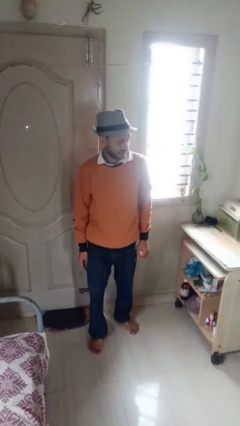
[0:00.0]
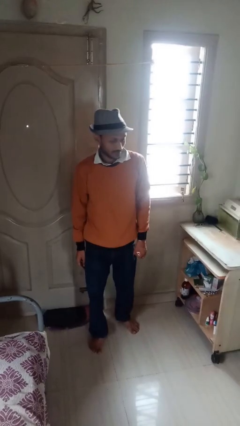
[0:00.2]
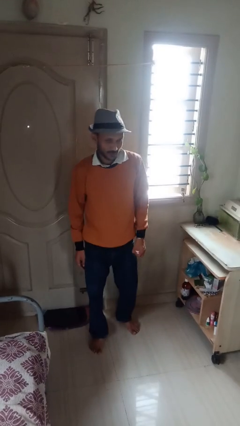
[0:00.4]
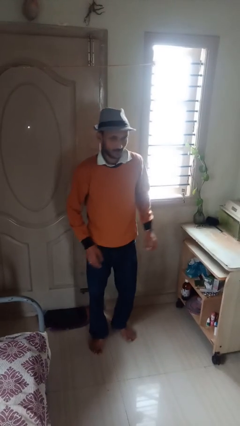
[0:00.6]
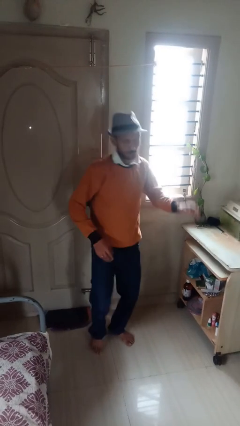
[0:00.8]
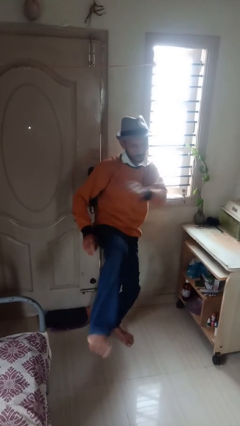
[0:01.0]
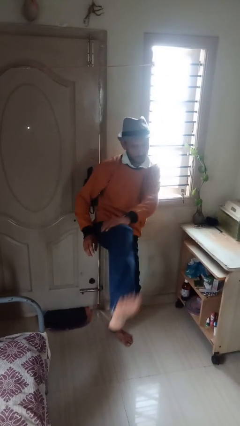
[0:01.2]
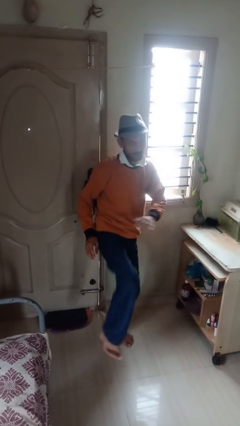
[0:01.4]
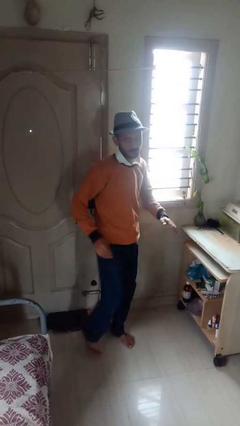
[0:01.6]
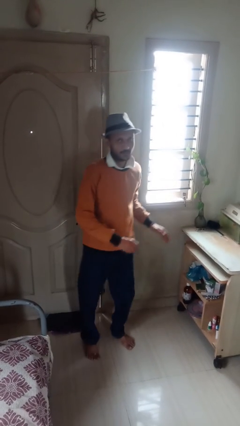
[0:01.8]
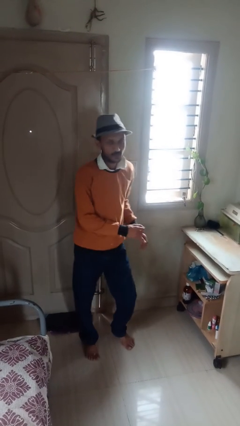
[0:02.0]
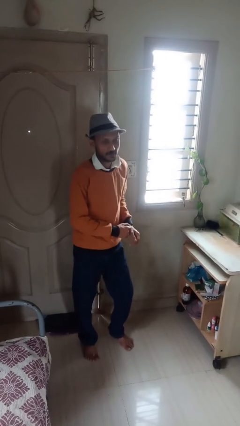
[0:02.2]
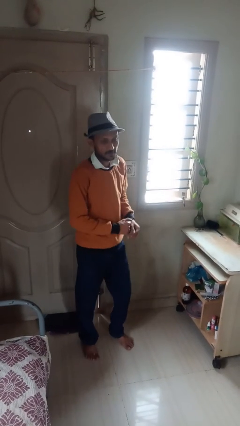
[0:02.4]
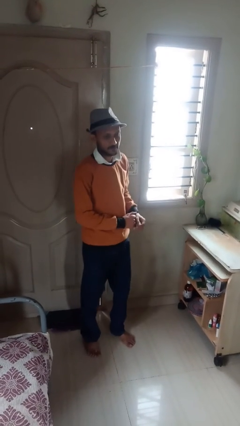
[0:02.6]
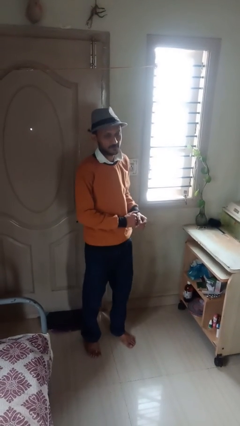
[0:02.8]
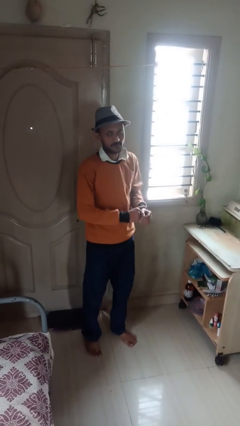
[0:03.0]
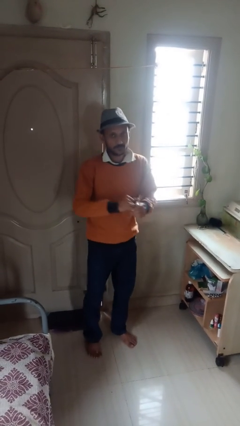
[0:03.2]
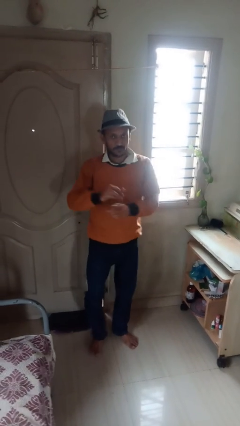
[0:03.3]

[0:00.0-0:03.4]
person karate kicks

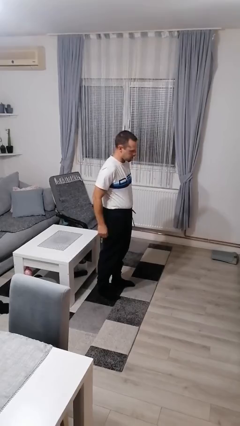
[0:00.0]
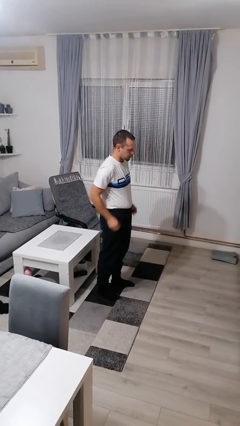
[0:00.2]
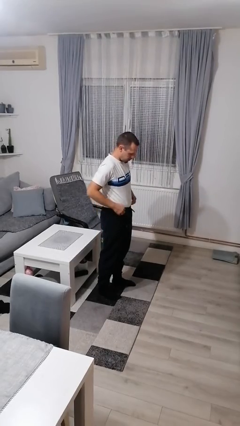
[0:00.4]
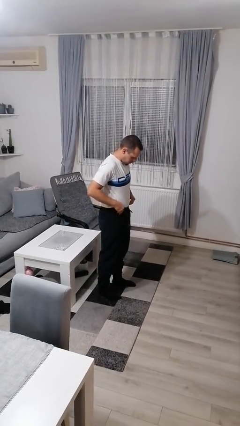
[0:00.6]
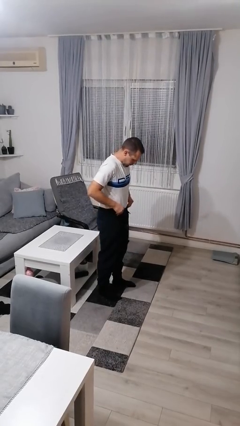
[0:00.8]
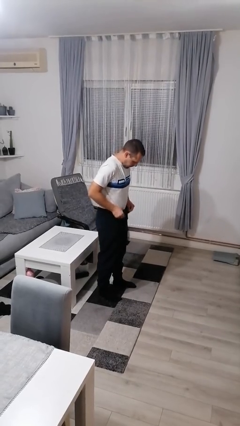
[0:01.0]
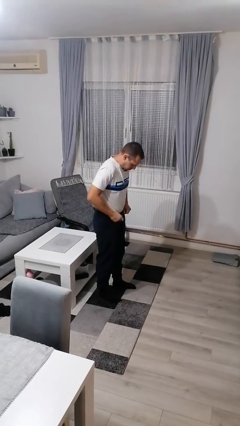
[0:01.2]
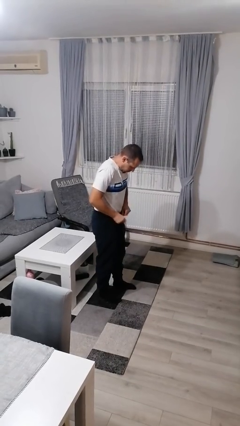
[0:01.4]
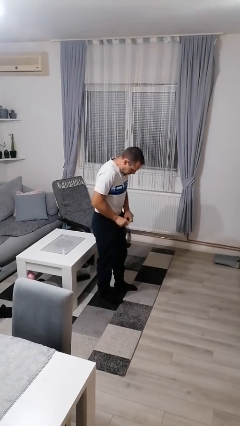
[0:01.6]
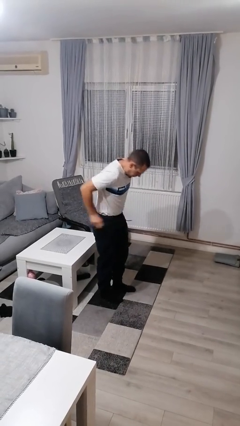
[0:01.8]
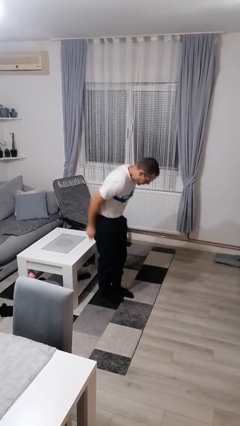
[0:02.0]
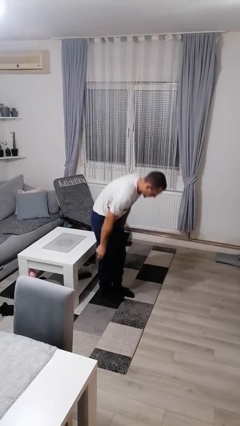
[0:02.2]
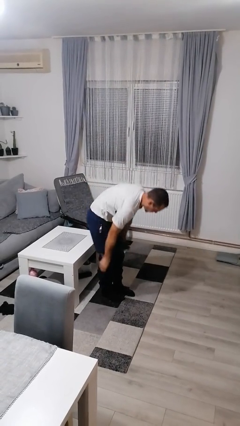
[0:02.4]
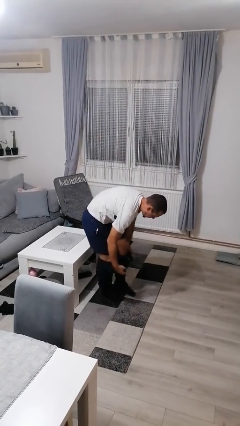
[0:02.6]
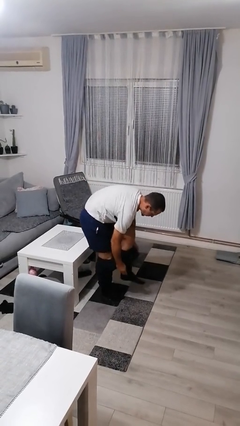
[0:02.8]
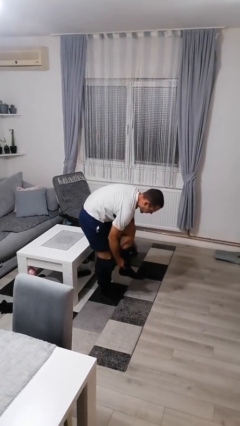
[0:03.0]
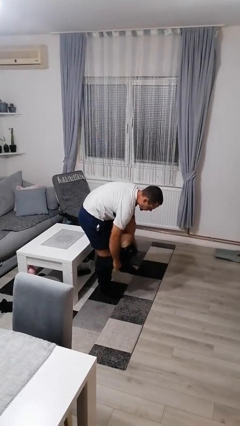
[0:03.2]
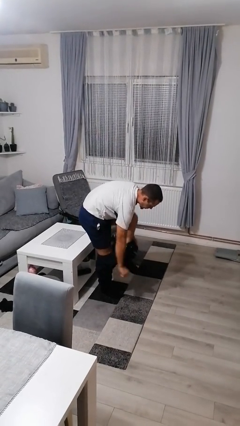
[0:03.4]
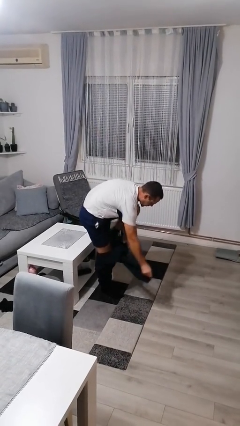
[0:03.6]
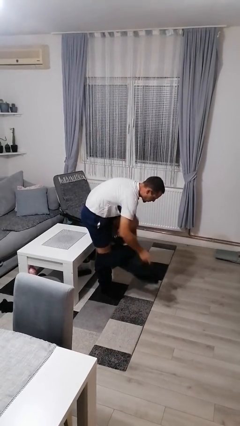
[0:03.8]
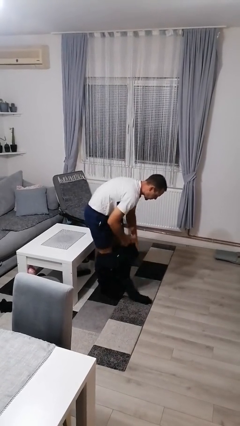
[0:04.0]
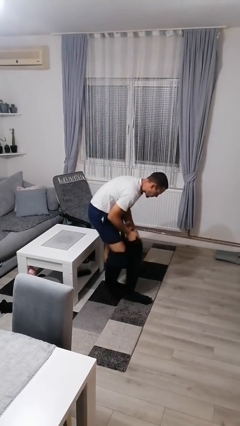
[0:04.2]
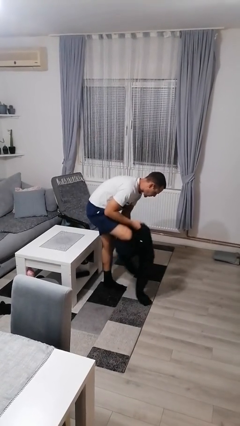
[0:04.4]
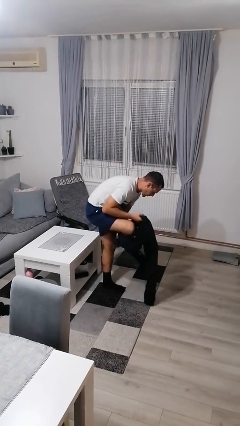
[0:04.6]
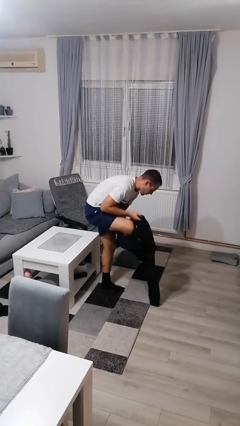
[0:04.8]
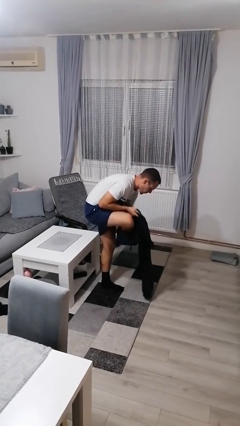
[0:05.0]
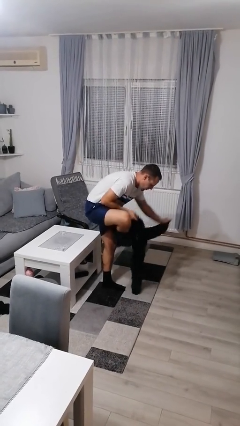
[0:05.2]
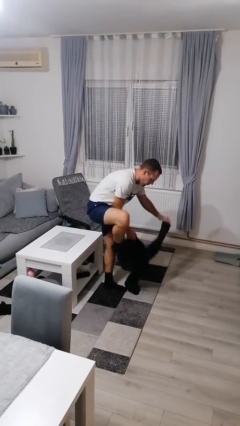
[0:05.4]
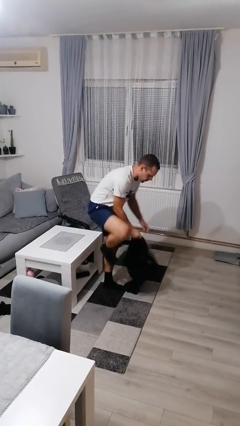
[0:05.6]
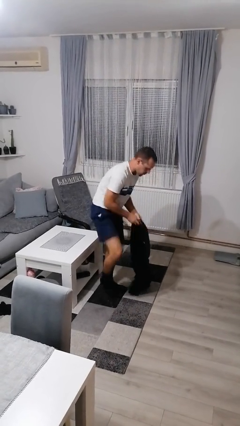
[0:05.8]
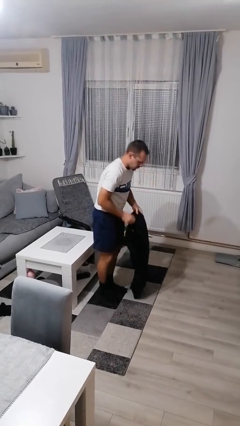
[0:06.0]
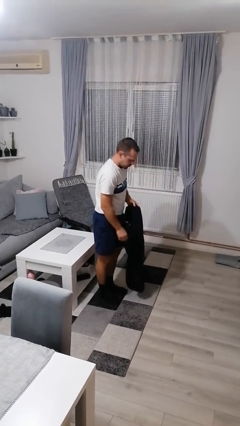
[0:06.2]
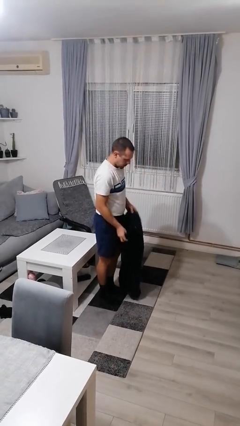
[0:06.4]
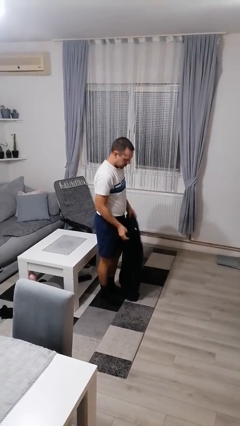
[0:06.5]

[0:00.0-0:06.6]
person puts on pants

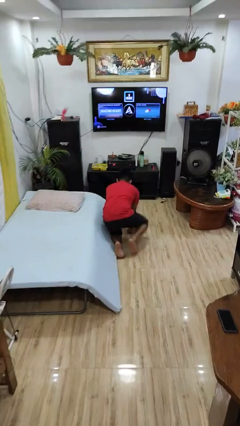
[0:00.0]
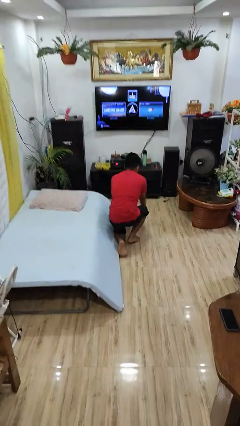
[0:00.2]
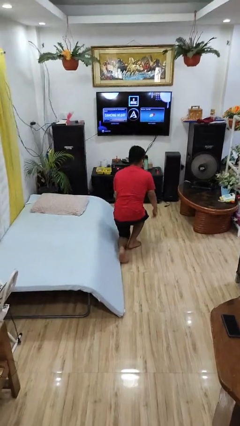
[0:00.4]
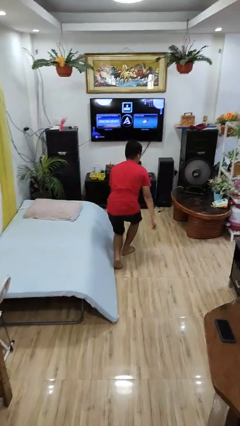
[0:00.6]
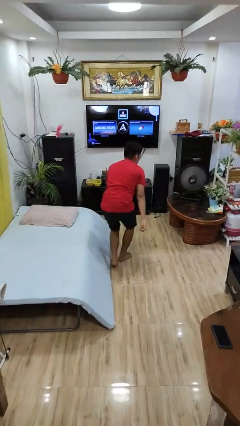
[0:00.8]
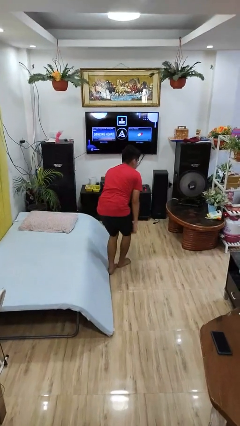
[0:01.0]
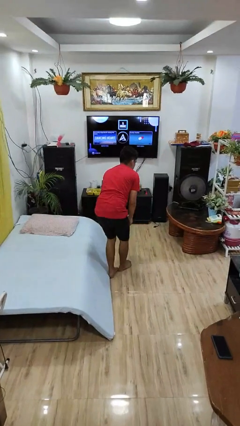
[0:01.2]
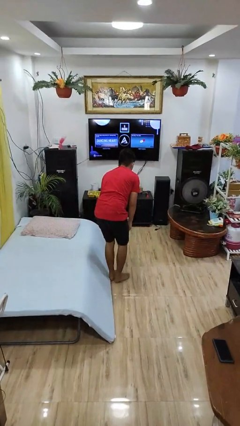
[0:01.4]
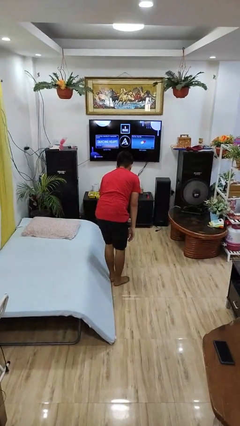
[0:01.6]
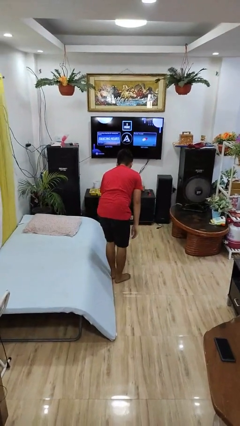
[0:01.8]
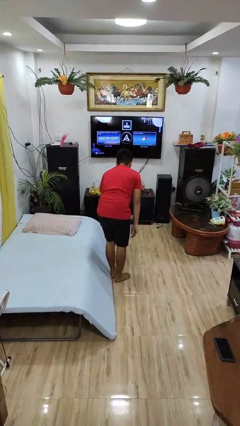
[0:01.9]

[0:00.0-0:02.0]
person stands up from floor

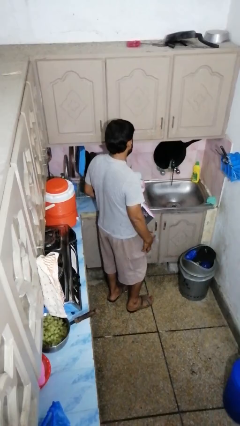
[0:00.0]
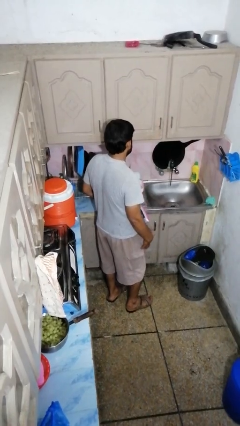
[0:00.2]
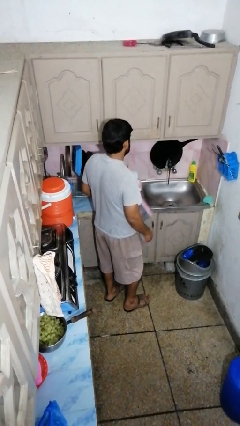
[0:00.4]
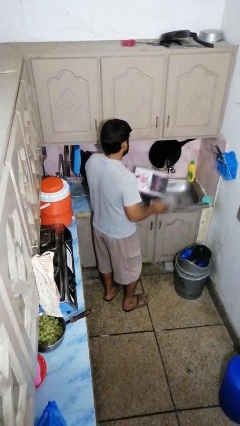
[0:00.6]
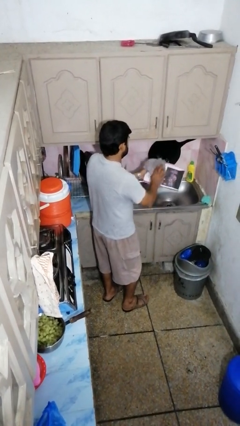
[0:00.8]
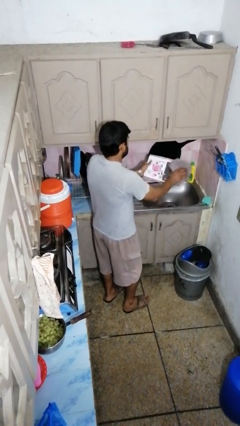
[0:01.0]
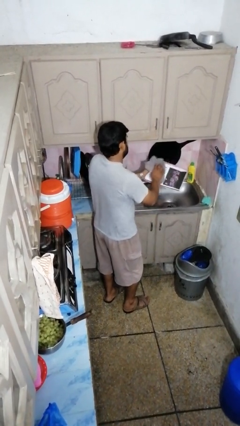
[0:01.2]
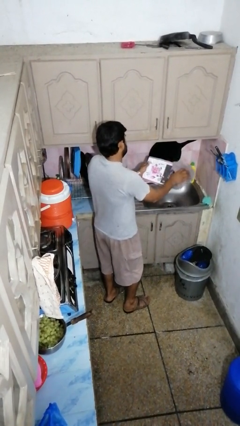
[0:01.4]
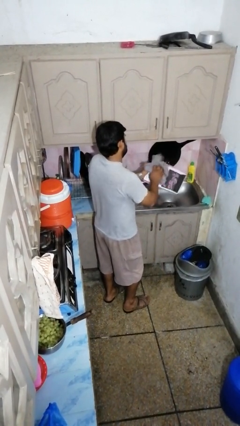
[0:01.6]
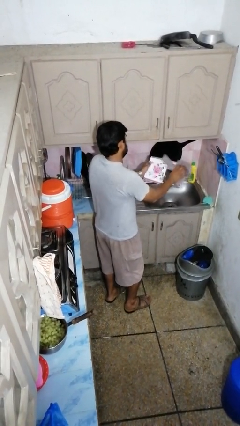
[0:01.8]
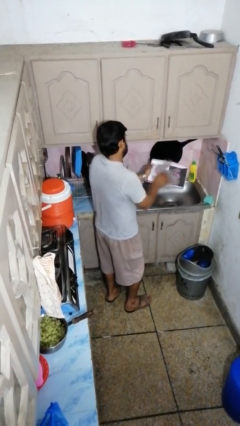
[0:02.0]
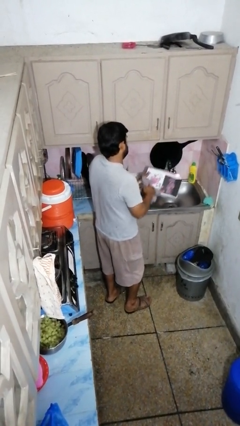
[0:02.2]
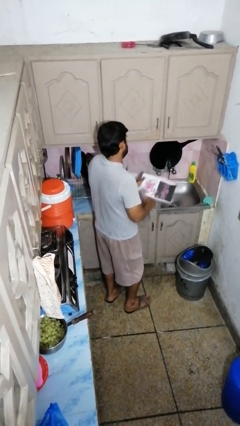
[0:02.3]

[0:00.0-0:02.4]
person dries dish

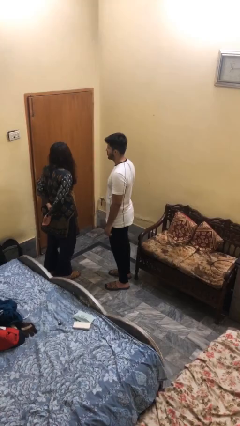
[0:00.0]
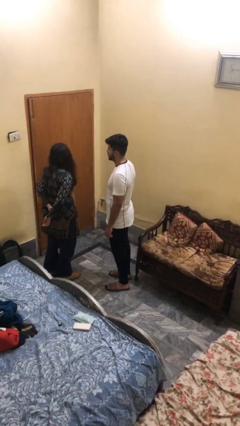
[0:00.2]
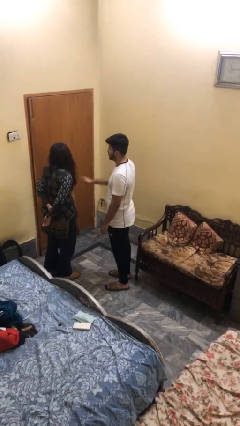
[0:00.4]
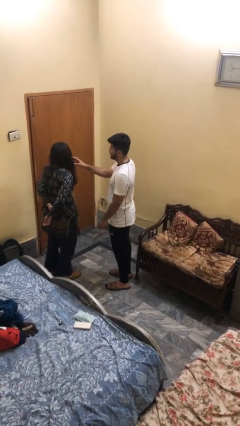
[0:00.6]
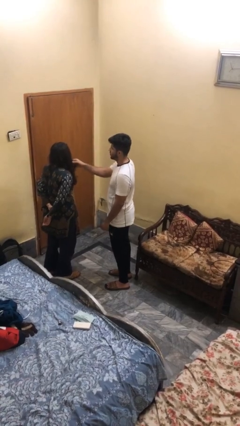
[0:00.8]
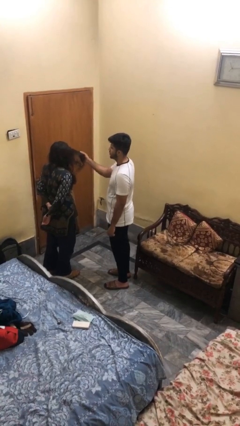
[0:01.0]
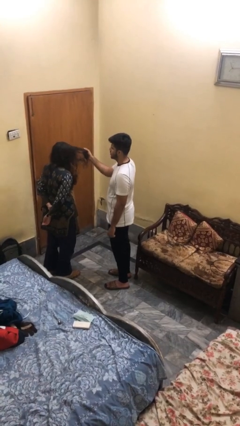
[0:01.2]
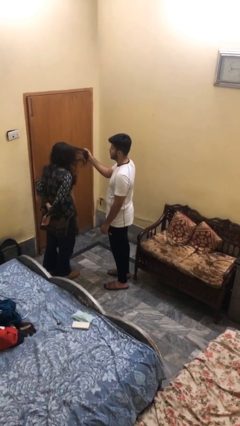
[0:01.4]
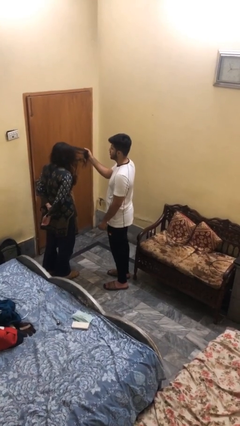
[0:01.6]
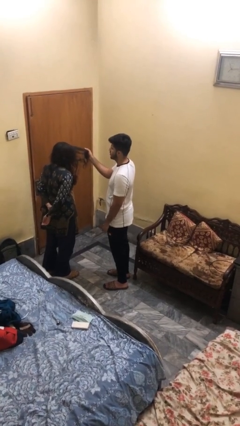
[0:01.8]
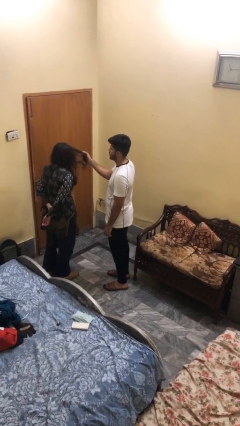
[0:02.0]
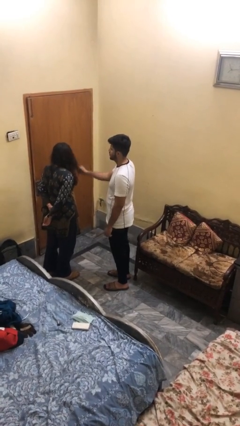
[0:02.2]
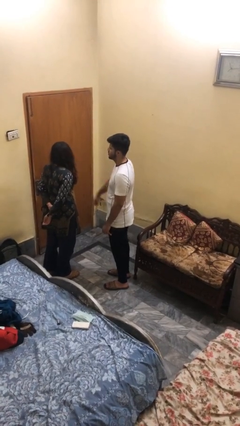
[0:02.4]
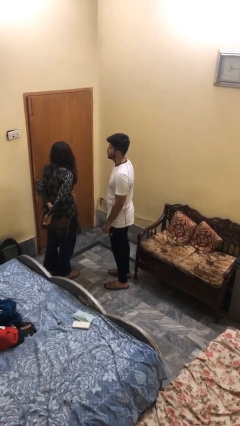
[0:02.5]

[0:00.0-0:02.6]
person grabs person by hair

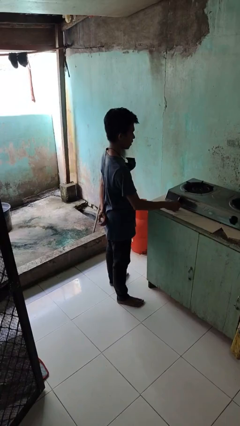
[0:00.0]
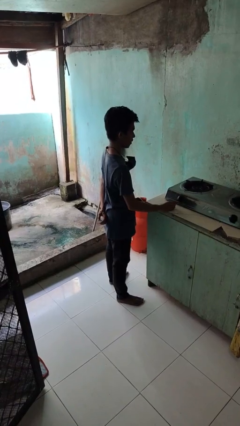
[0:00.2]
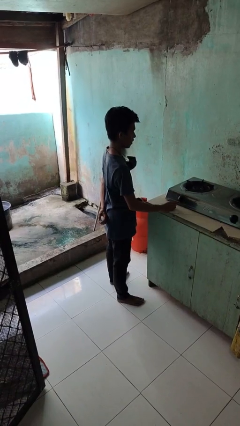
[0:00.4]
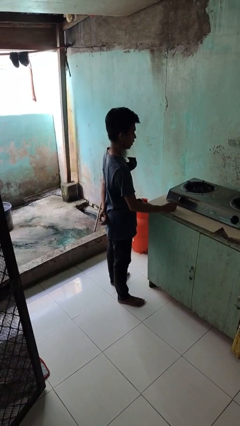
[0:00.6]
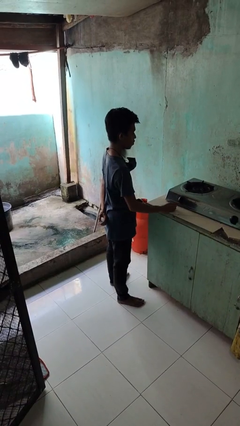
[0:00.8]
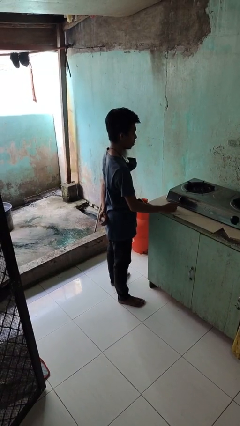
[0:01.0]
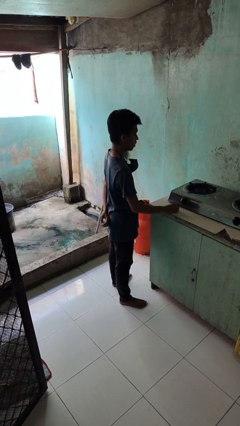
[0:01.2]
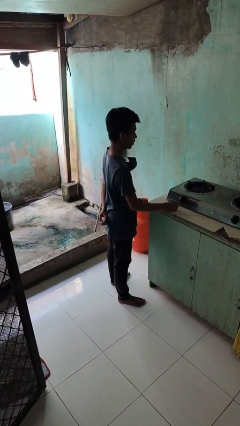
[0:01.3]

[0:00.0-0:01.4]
person turns off stovetop
